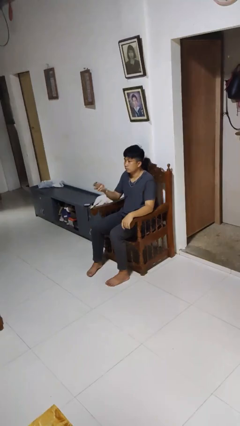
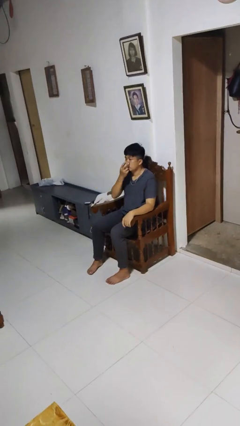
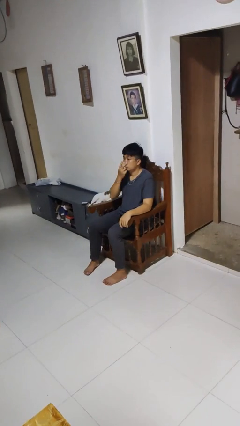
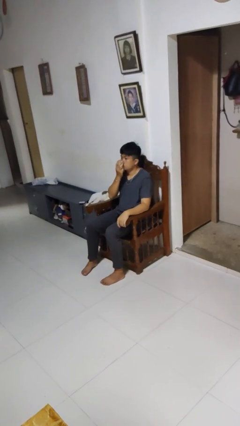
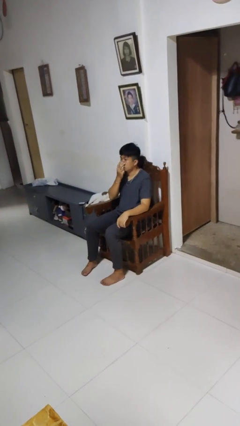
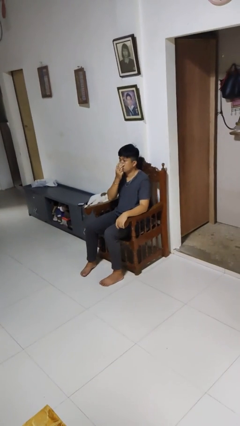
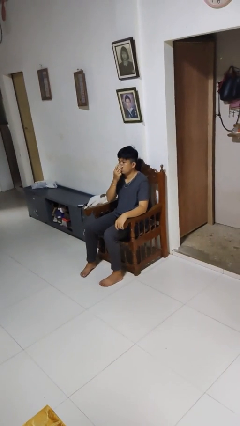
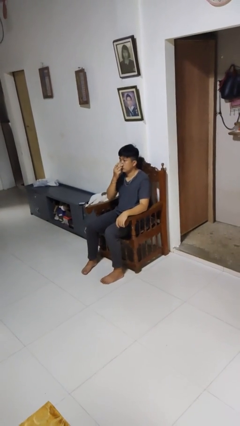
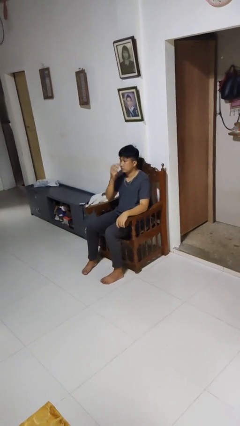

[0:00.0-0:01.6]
person blows nose

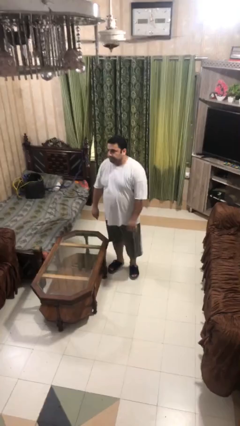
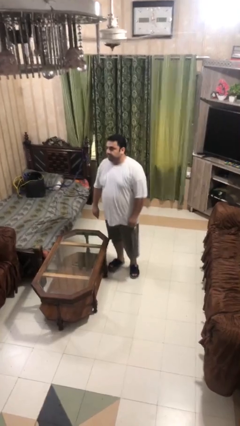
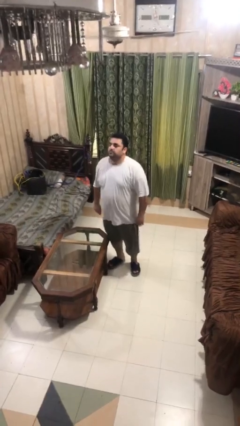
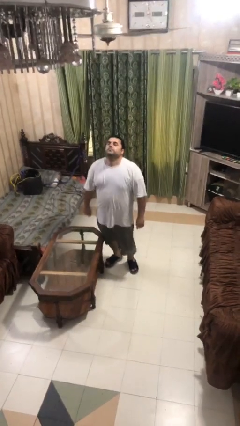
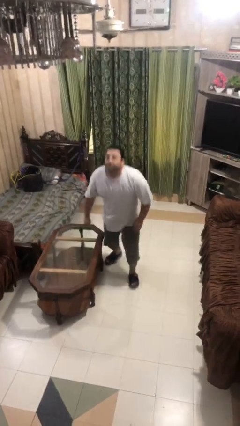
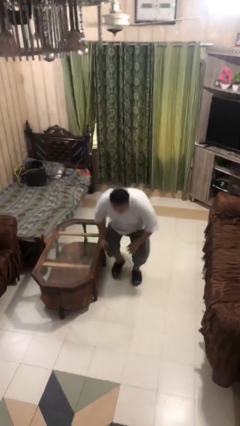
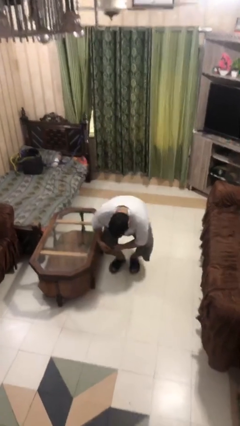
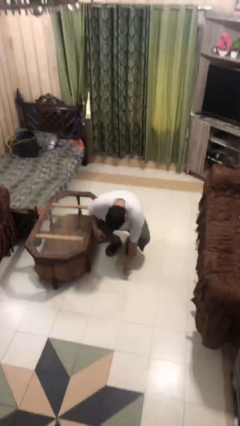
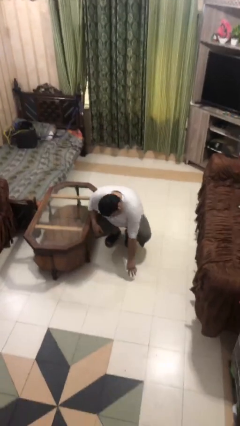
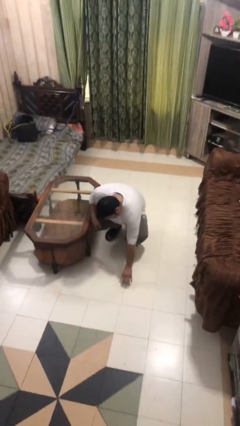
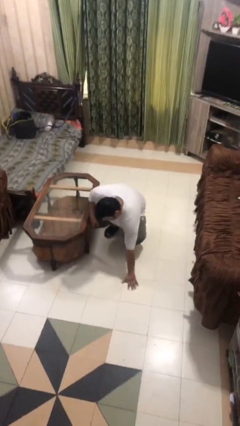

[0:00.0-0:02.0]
person trips on object on floor

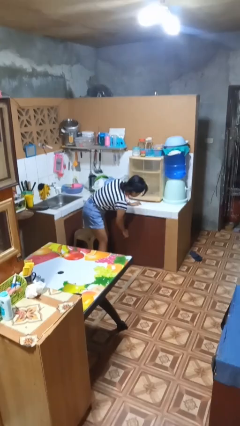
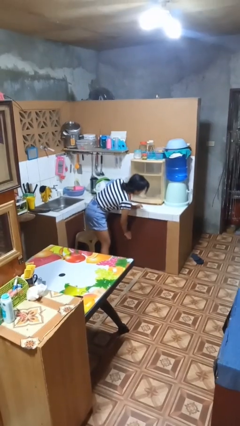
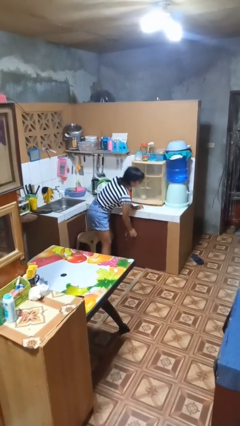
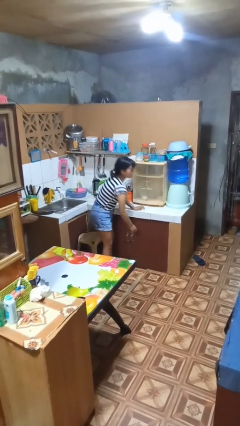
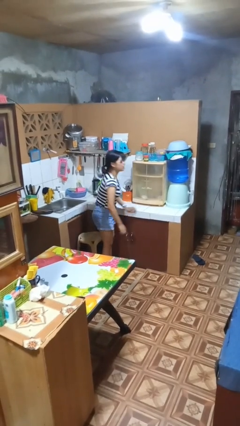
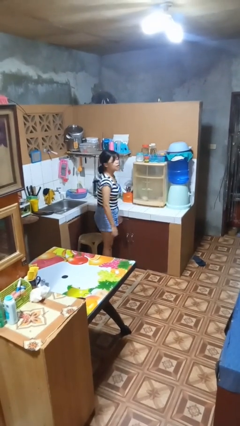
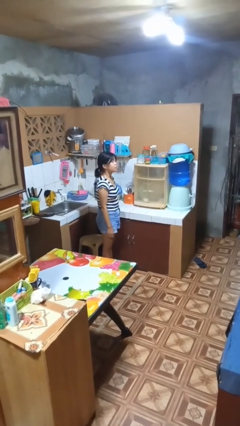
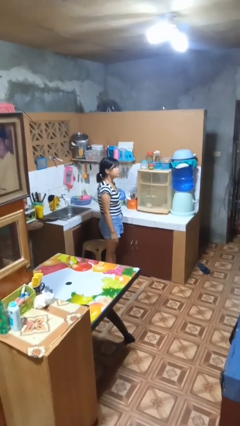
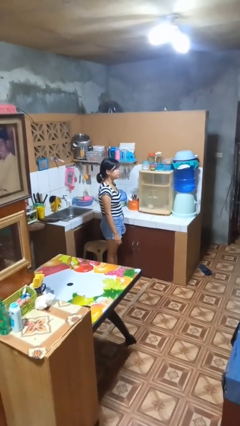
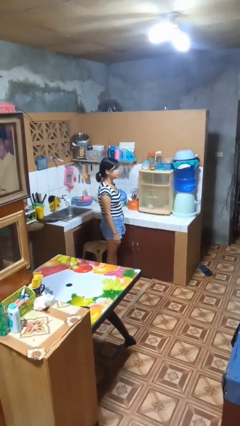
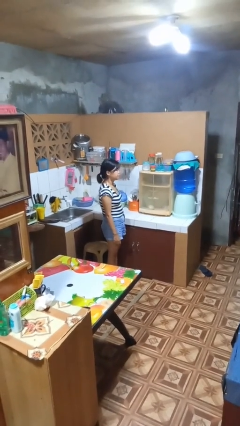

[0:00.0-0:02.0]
person closes cabinet

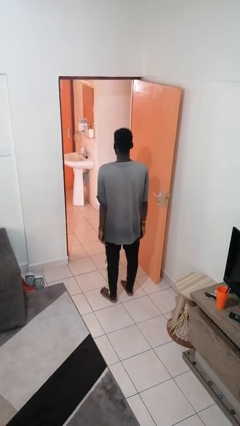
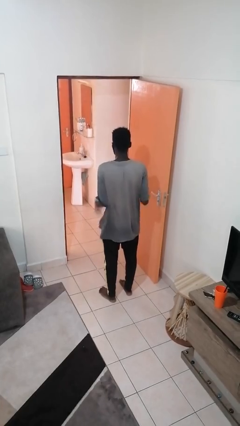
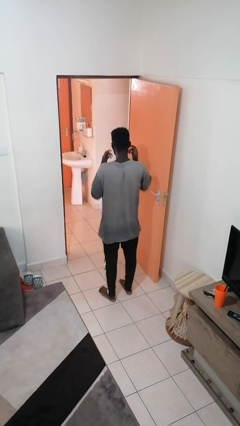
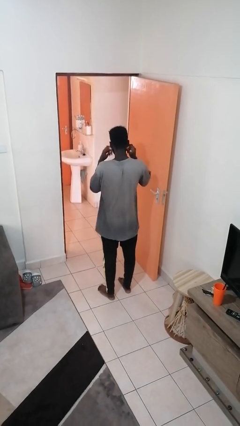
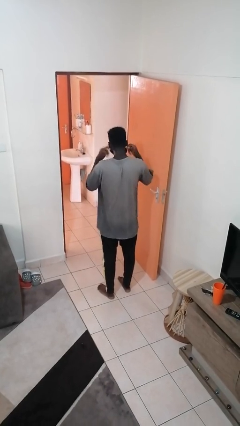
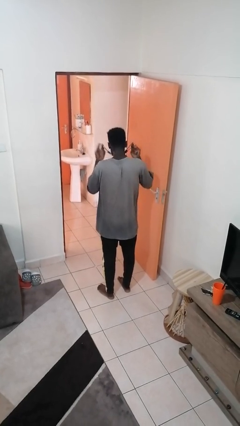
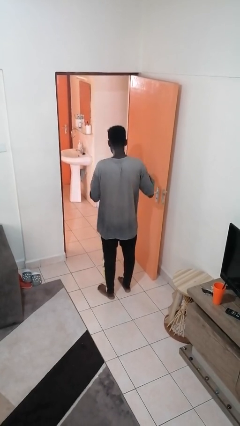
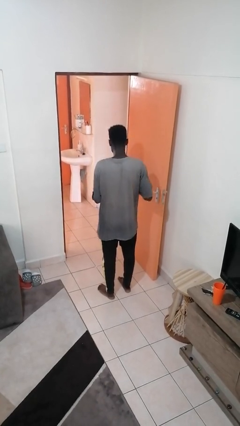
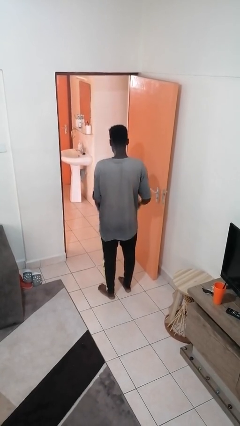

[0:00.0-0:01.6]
person takes off facemask

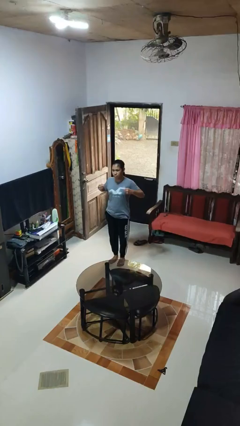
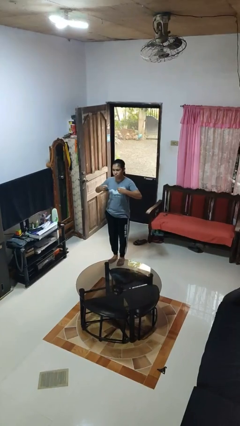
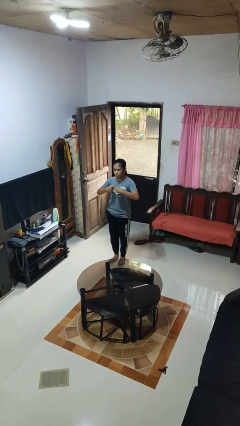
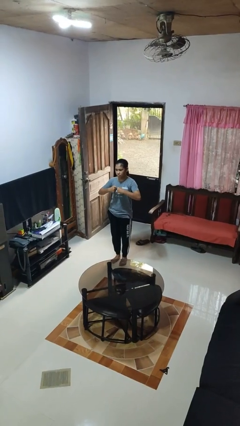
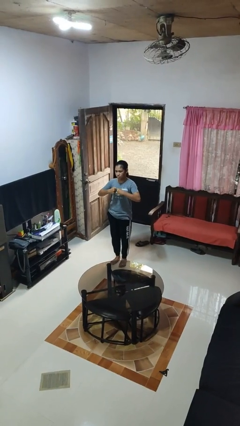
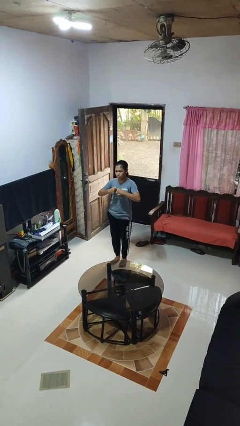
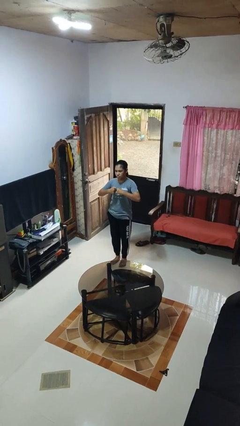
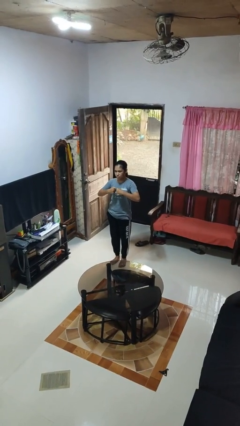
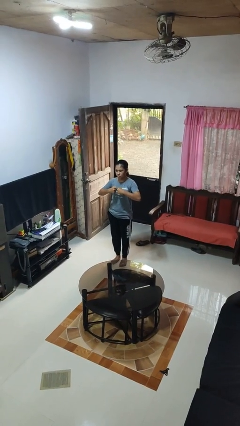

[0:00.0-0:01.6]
person gestures zoom out

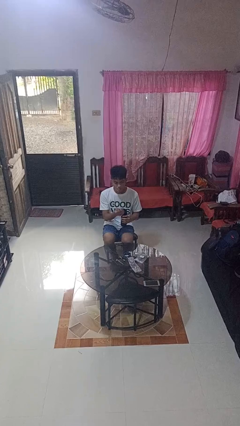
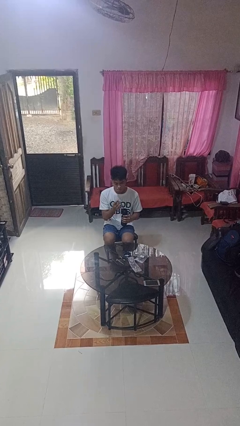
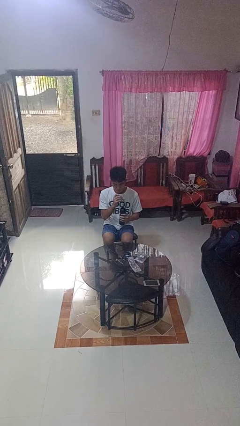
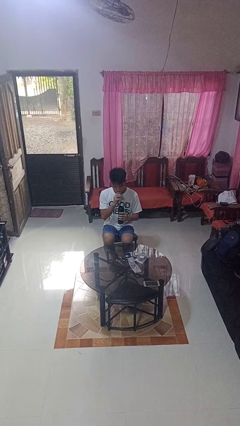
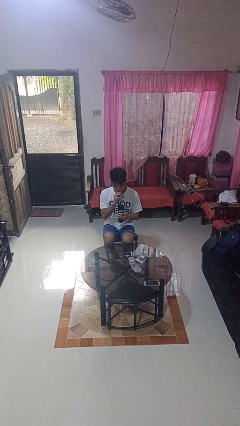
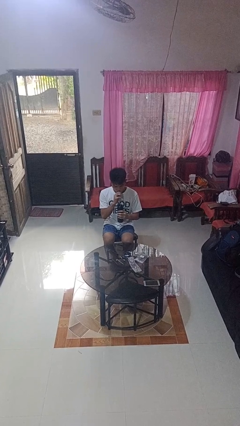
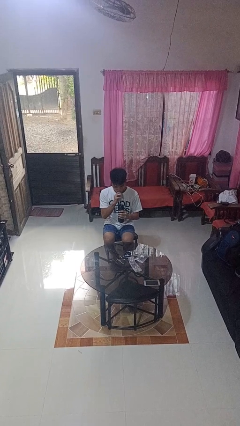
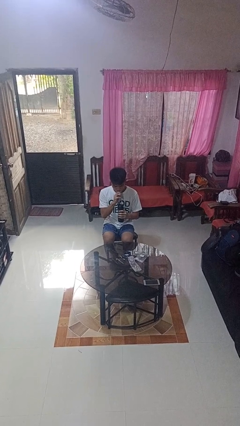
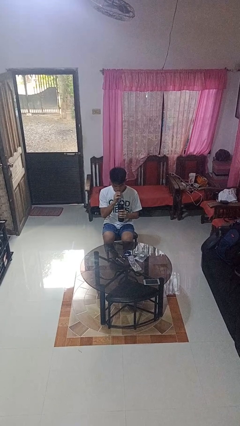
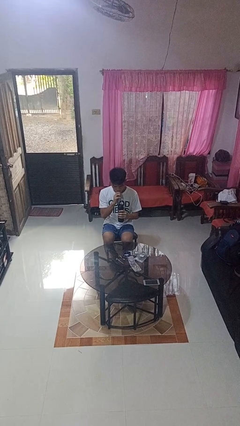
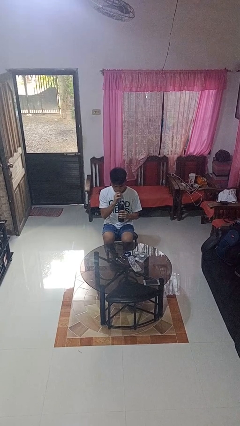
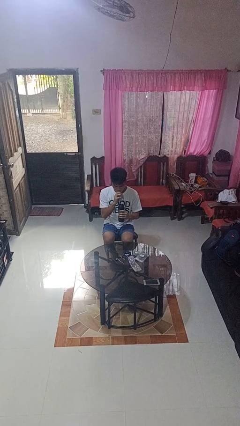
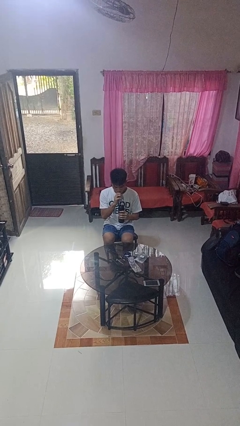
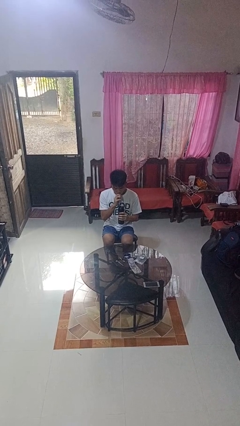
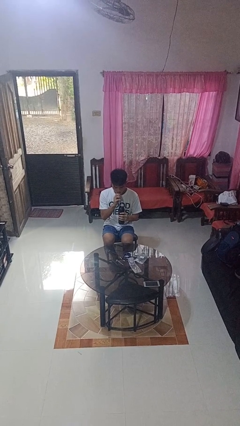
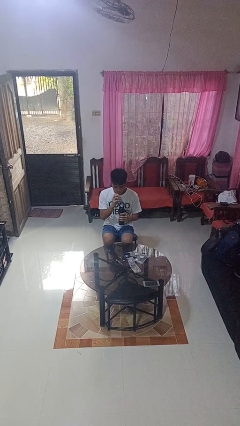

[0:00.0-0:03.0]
person drinks from straw

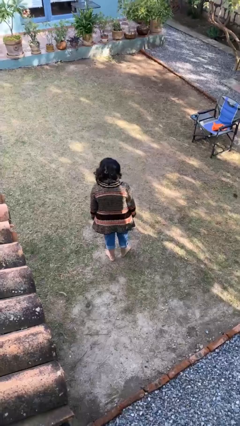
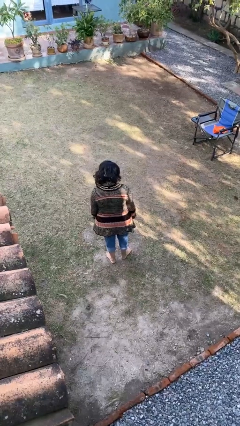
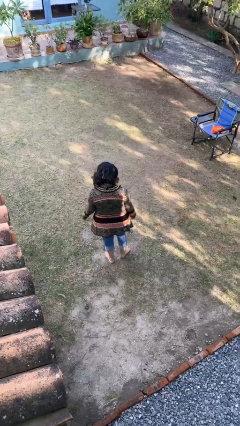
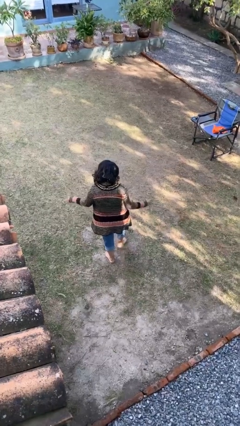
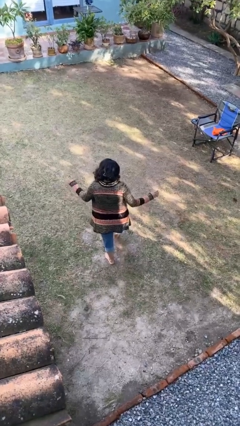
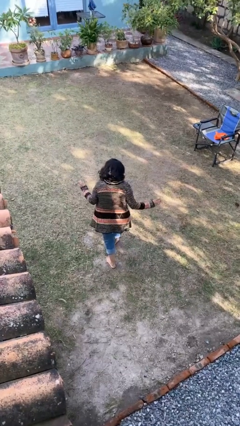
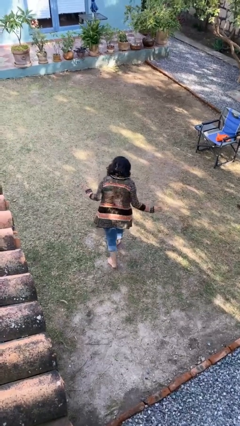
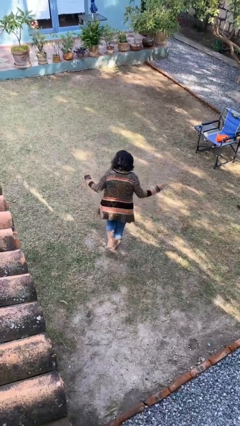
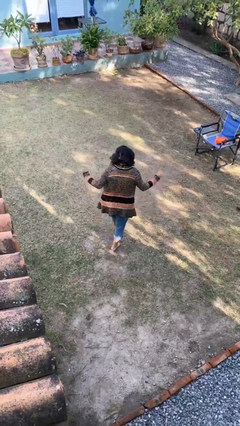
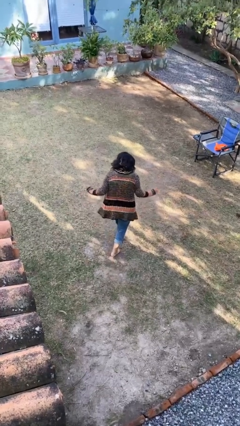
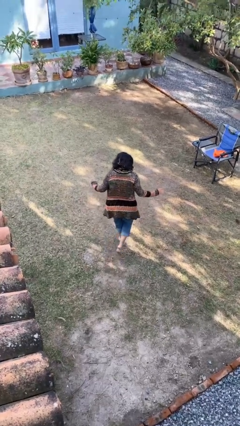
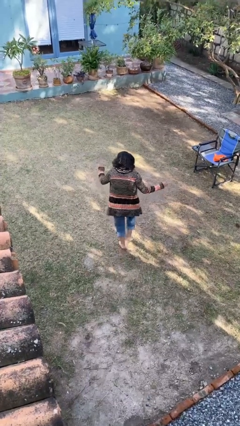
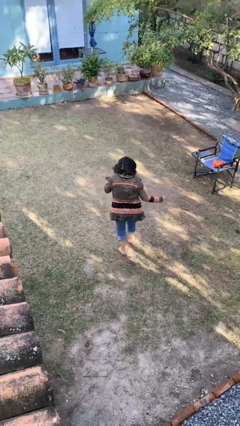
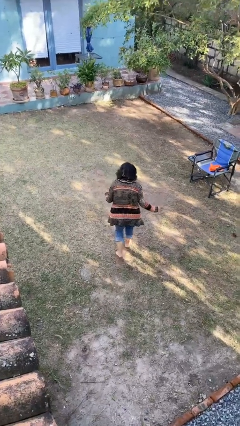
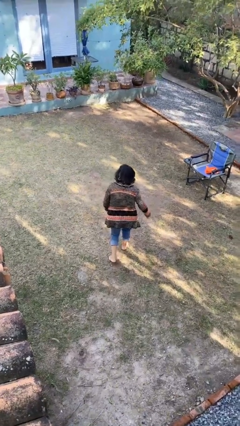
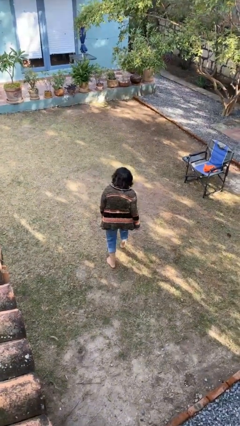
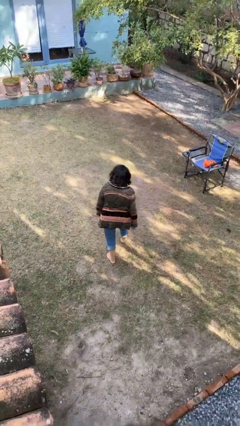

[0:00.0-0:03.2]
person walks tiptoe

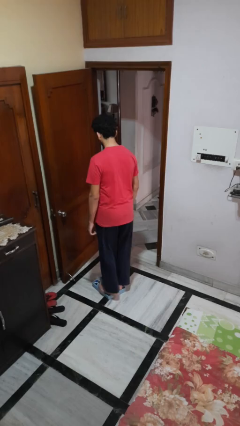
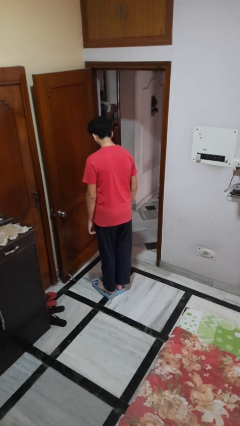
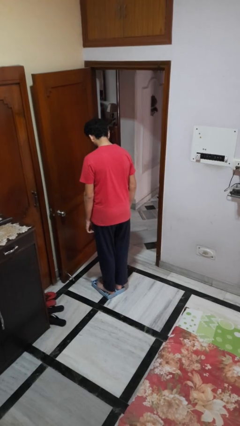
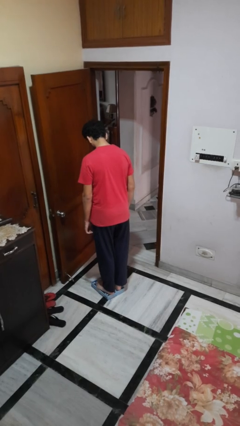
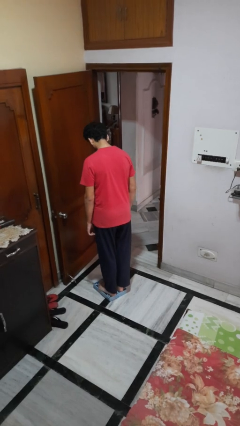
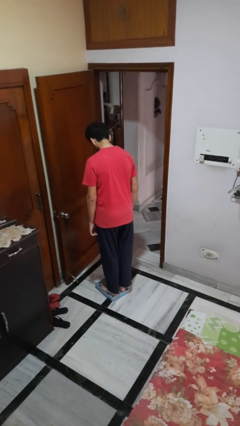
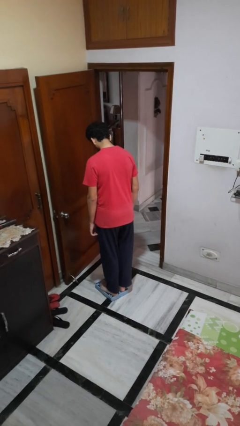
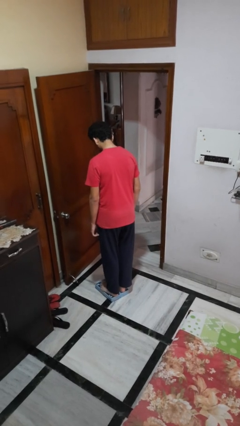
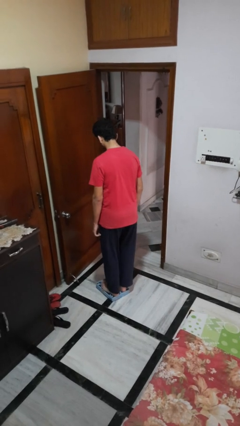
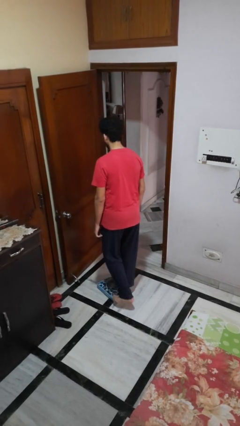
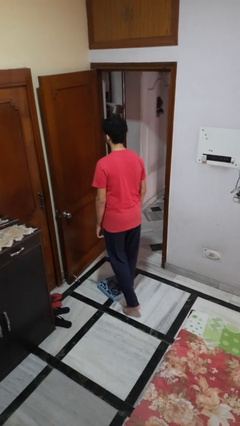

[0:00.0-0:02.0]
person uses bodyweight scale

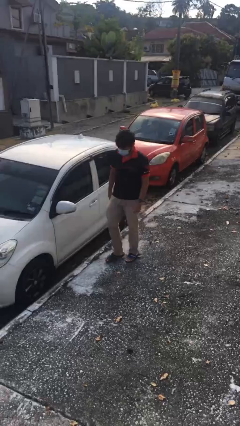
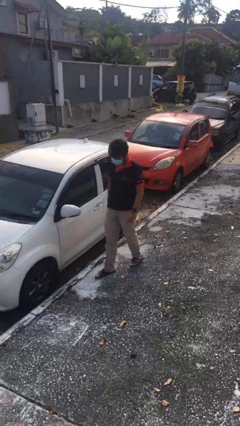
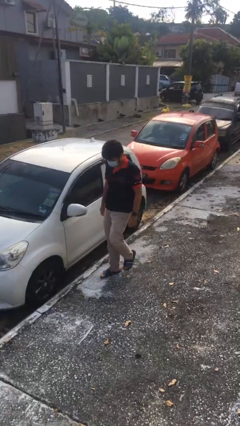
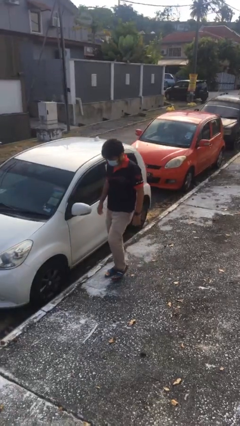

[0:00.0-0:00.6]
person kicks car tires
